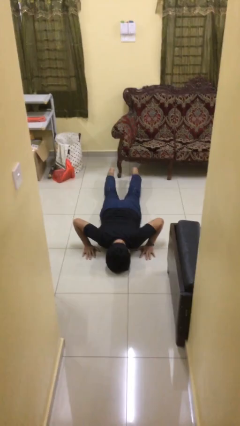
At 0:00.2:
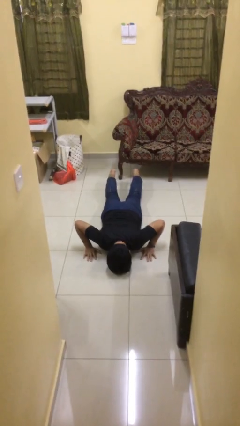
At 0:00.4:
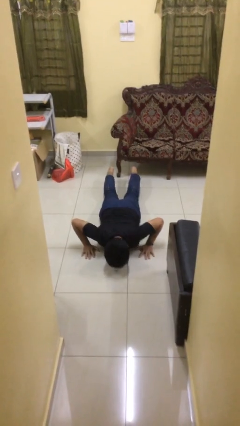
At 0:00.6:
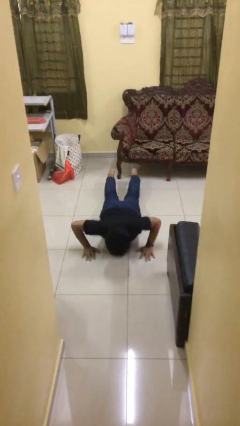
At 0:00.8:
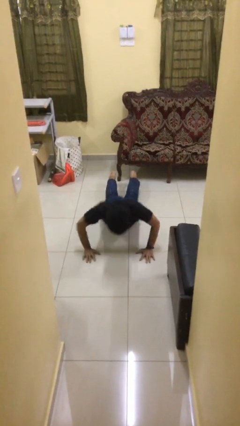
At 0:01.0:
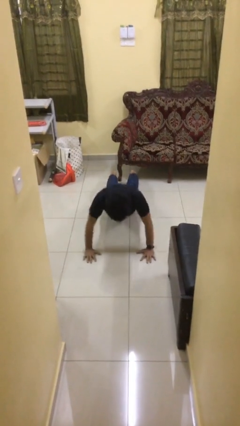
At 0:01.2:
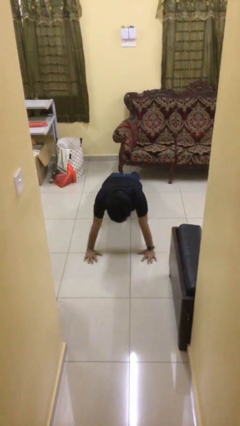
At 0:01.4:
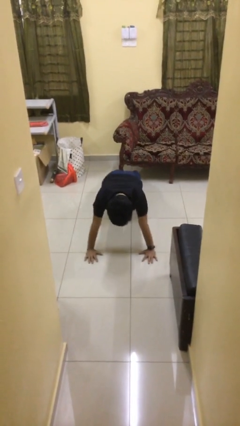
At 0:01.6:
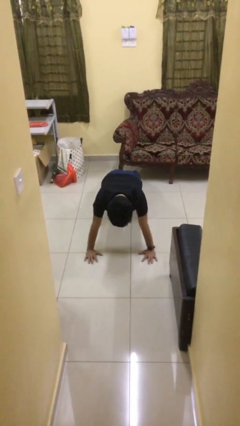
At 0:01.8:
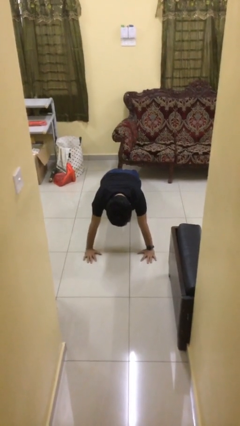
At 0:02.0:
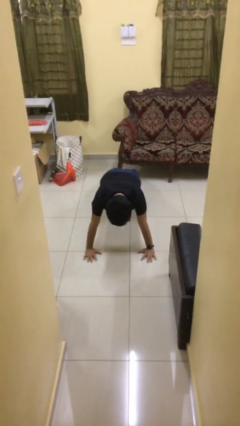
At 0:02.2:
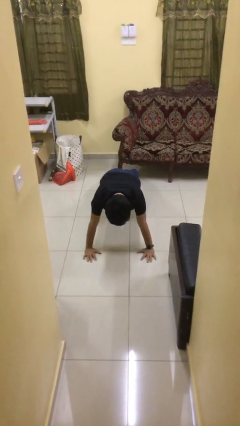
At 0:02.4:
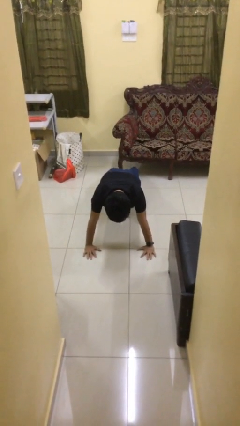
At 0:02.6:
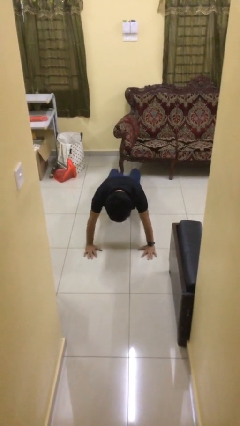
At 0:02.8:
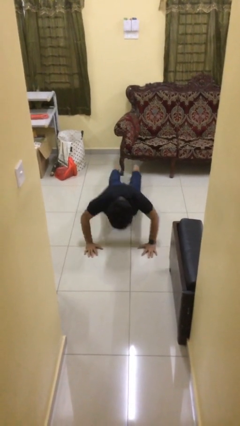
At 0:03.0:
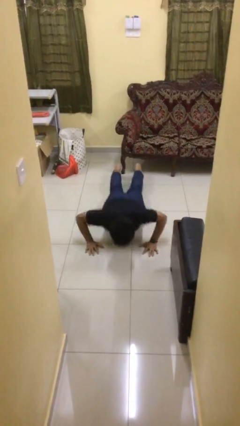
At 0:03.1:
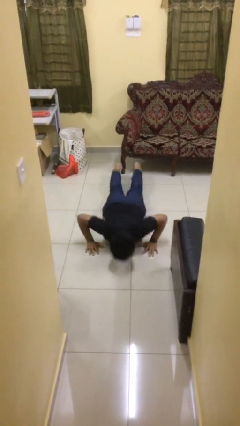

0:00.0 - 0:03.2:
person exercises with pushup

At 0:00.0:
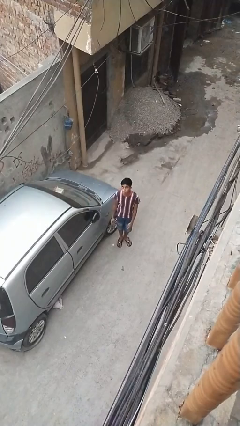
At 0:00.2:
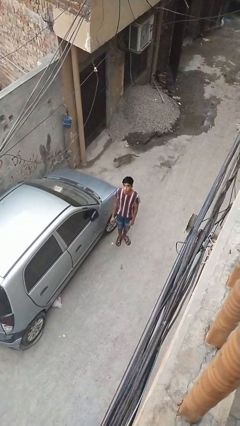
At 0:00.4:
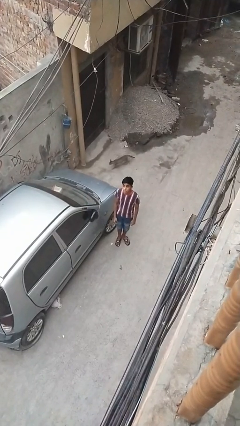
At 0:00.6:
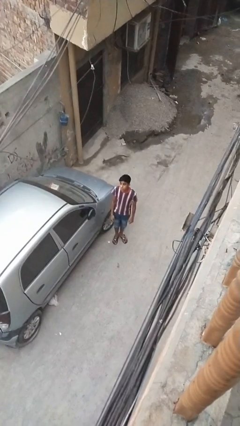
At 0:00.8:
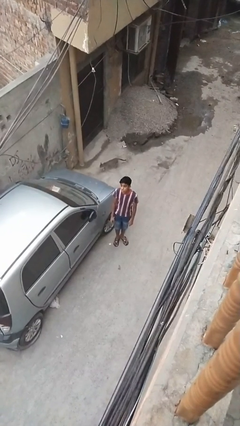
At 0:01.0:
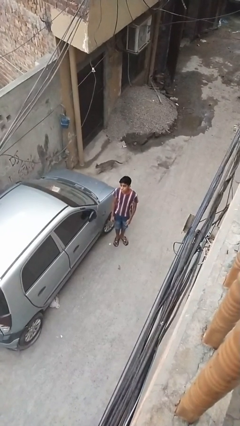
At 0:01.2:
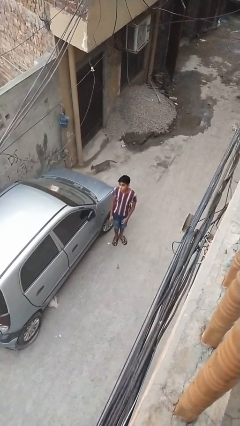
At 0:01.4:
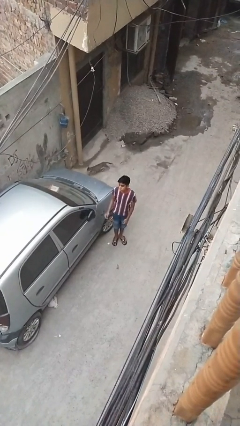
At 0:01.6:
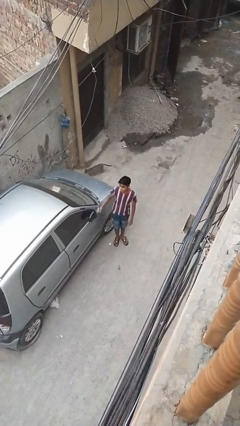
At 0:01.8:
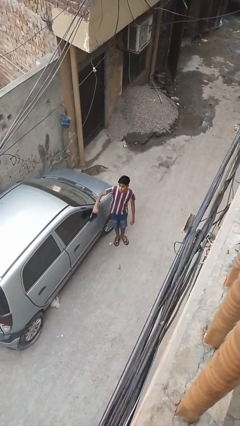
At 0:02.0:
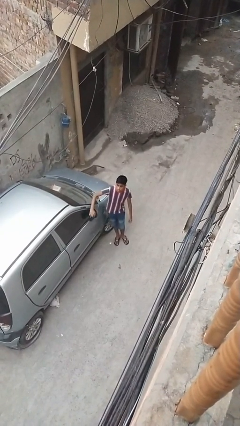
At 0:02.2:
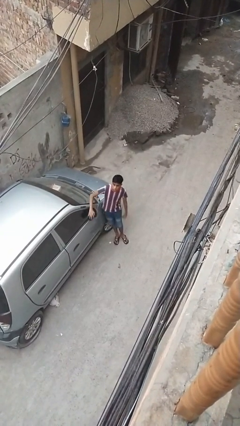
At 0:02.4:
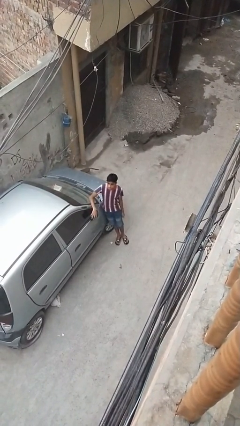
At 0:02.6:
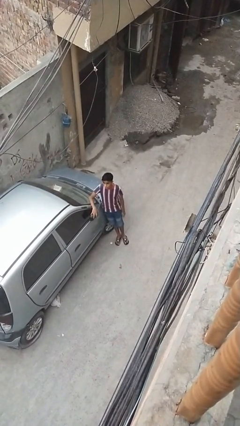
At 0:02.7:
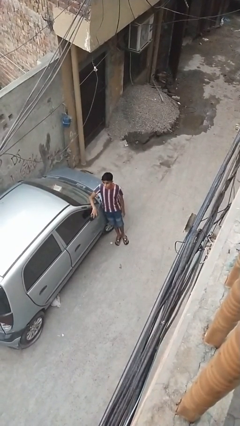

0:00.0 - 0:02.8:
person leans against car

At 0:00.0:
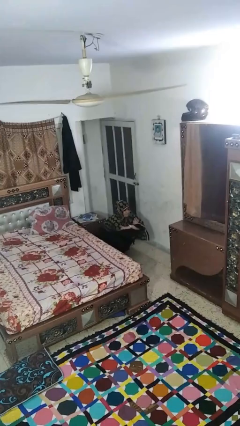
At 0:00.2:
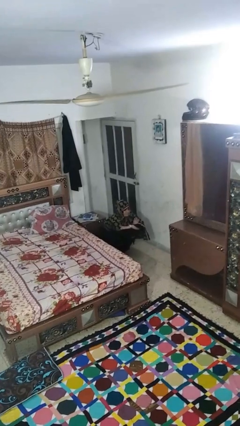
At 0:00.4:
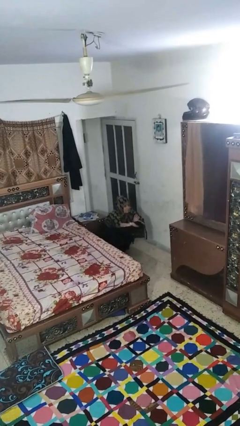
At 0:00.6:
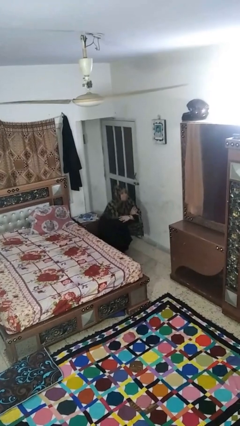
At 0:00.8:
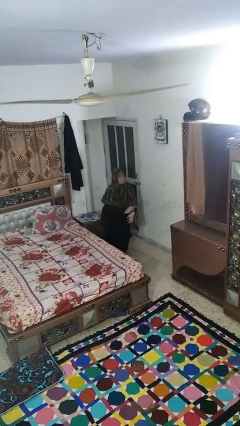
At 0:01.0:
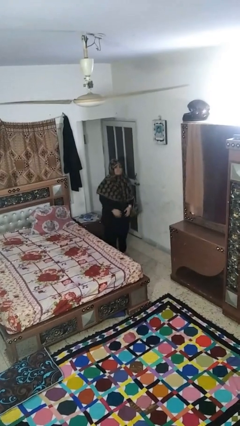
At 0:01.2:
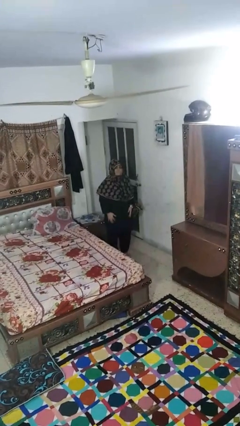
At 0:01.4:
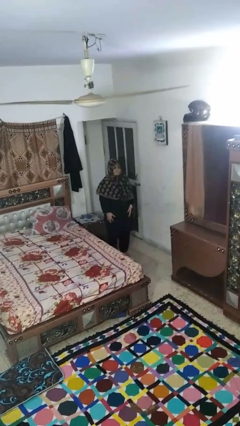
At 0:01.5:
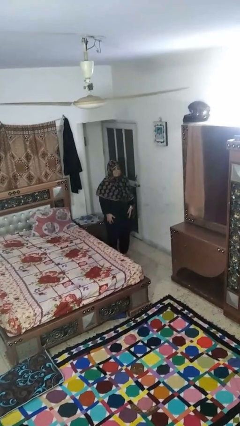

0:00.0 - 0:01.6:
person stands up

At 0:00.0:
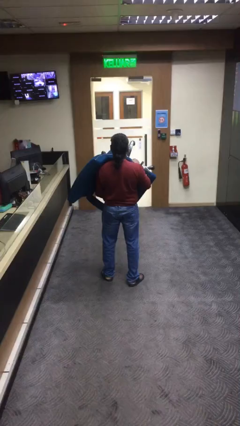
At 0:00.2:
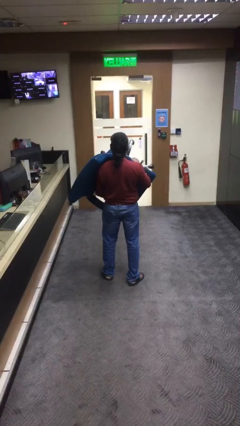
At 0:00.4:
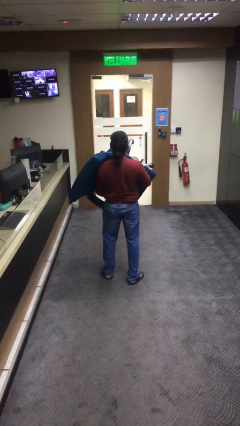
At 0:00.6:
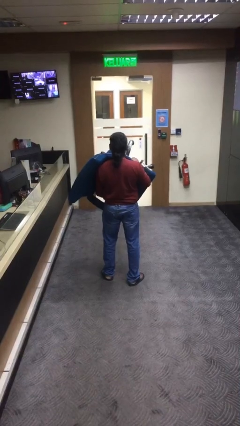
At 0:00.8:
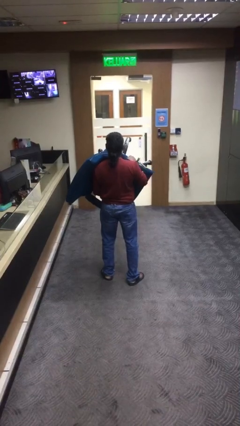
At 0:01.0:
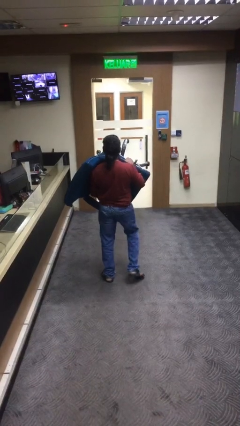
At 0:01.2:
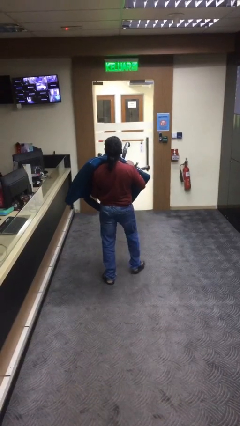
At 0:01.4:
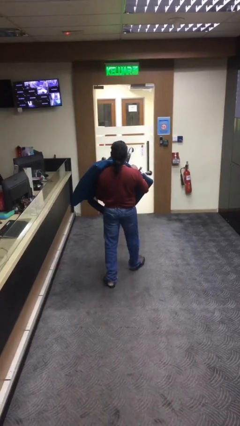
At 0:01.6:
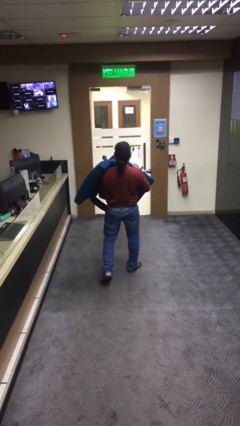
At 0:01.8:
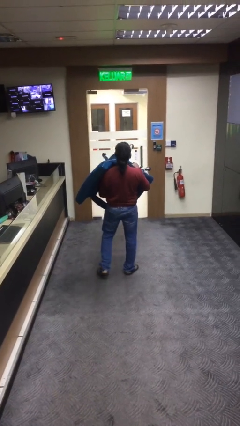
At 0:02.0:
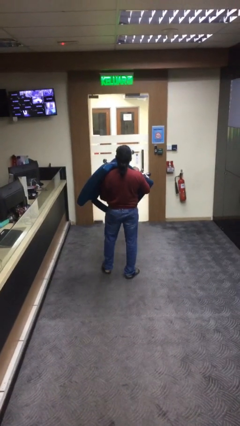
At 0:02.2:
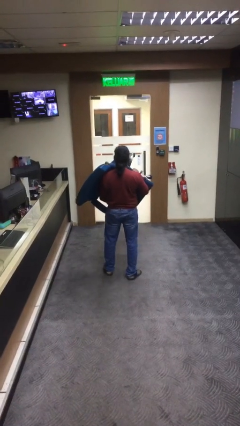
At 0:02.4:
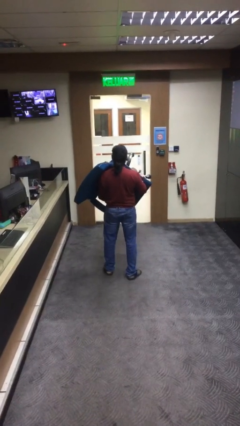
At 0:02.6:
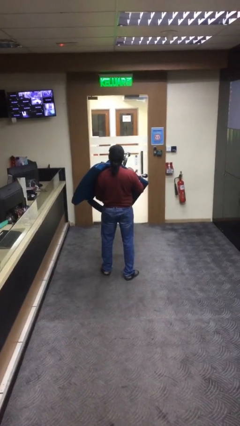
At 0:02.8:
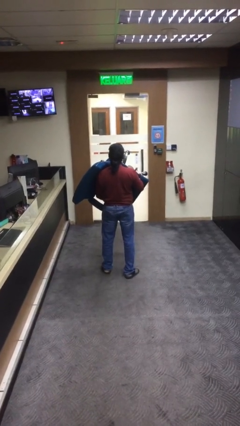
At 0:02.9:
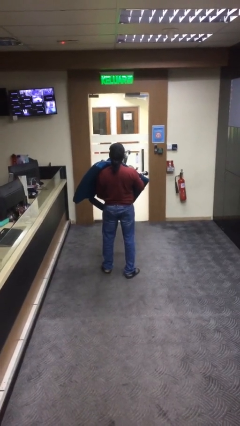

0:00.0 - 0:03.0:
person carries furniture

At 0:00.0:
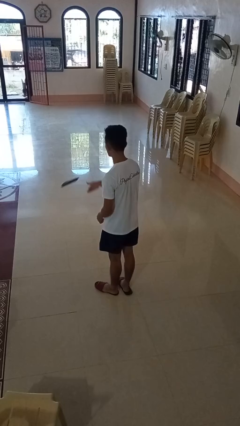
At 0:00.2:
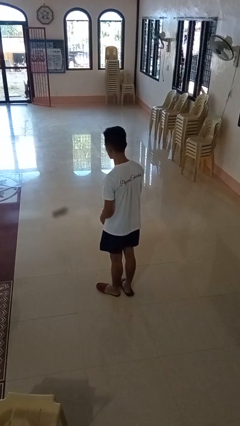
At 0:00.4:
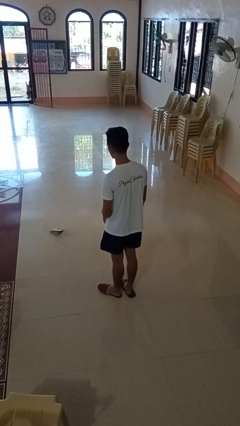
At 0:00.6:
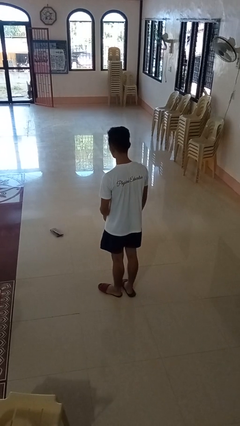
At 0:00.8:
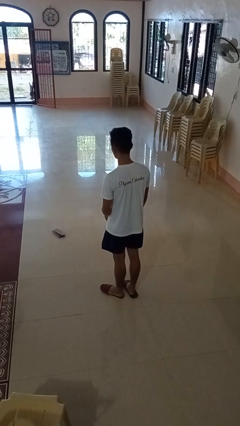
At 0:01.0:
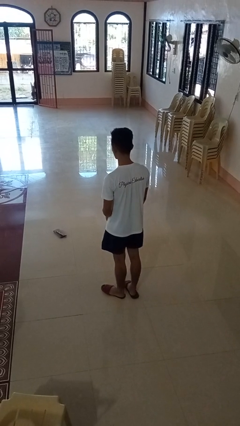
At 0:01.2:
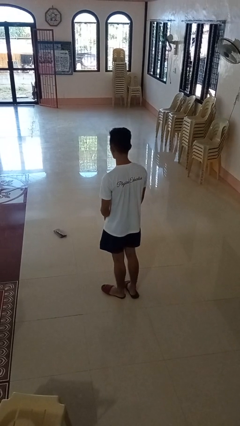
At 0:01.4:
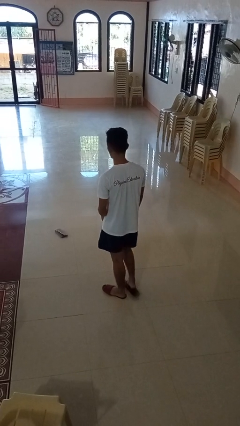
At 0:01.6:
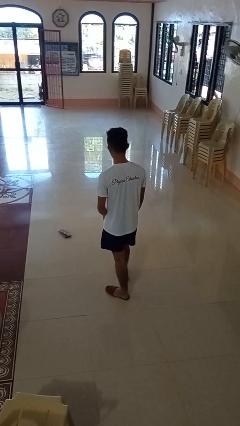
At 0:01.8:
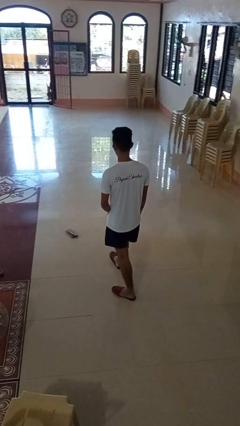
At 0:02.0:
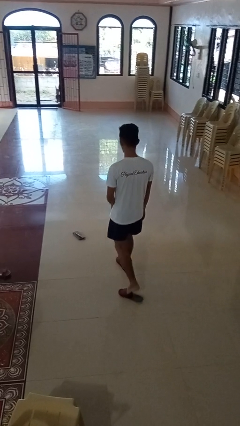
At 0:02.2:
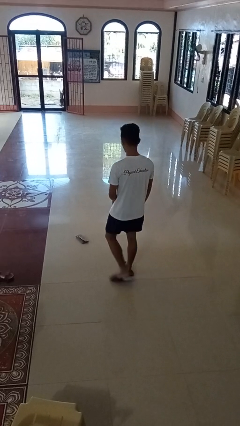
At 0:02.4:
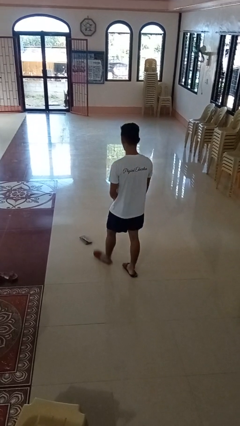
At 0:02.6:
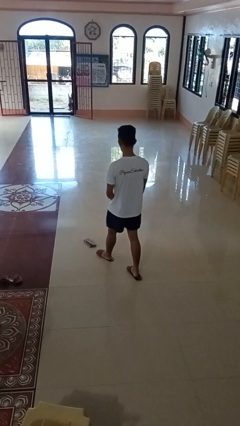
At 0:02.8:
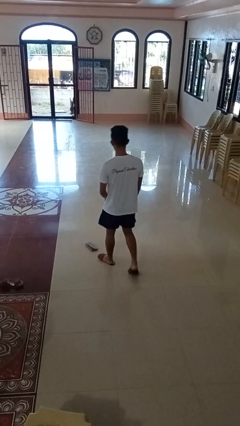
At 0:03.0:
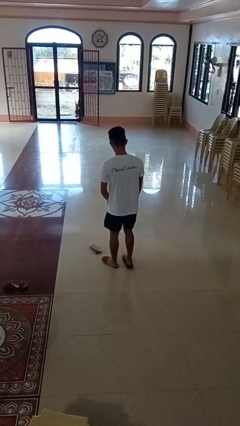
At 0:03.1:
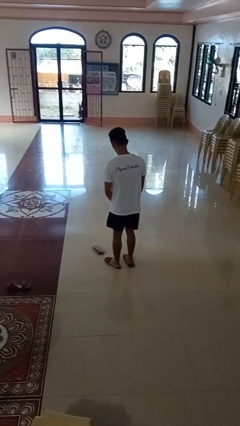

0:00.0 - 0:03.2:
person throws object to ground

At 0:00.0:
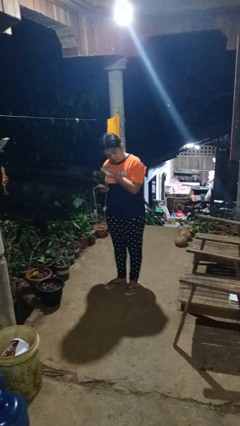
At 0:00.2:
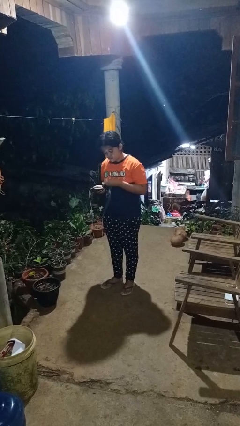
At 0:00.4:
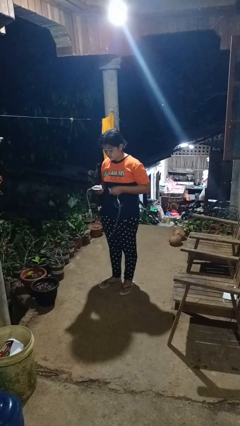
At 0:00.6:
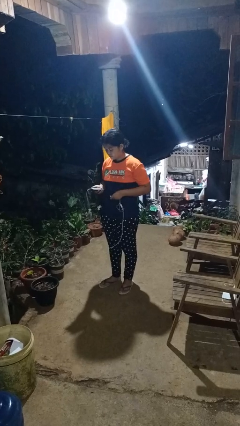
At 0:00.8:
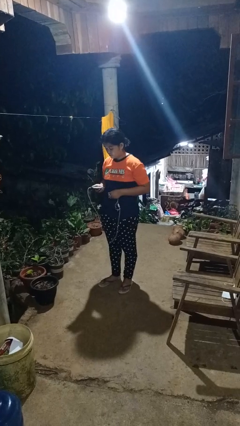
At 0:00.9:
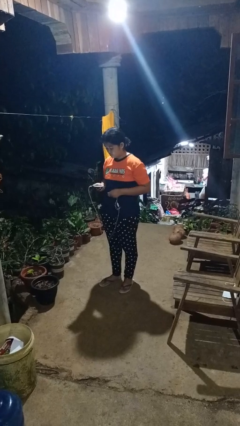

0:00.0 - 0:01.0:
person takes off headphones

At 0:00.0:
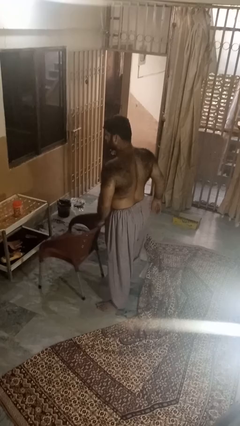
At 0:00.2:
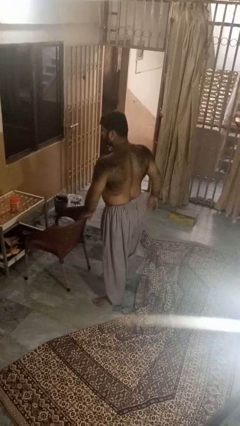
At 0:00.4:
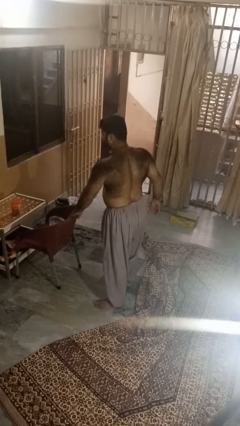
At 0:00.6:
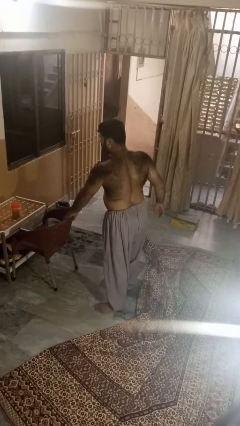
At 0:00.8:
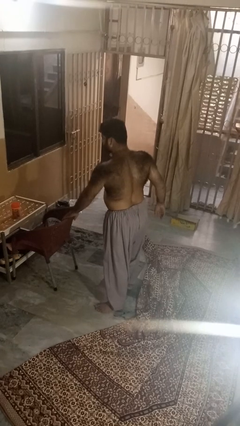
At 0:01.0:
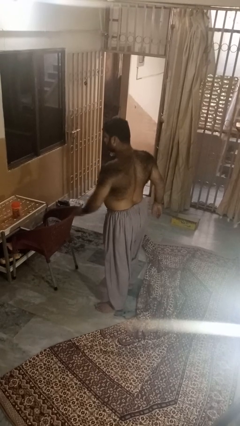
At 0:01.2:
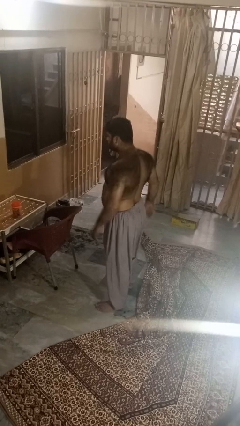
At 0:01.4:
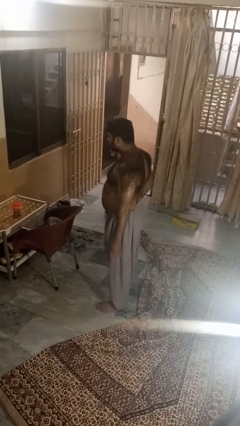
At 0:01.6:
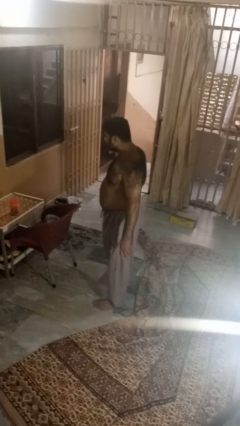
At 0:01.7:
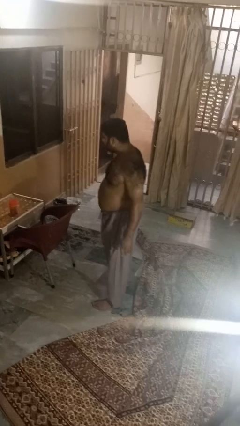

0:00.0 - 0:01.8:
person pushes in chair

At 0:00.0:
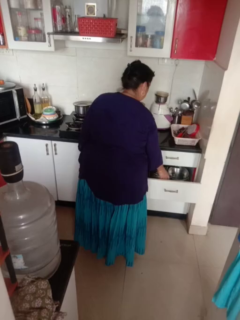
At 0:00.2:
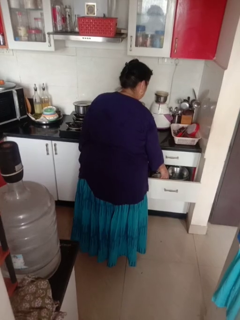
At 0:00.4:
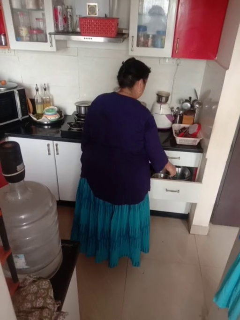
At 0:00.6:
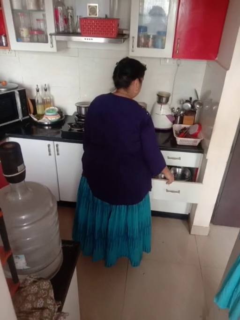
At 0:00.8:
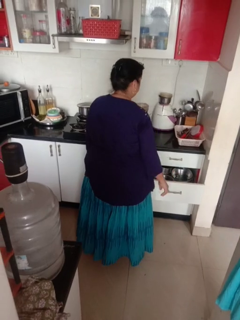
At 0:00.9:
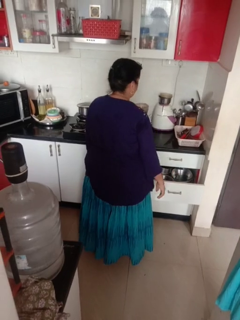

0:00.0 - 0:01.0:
person puts object into kitchen drawer
